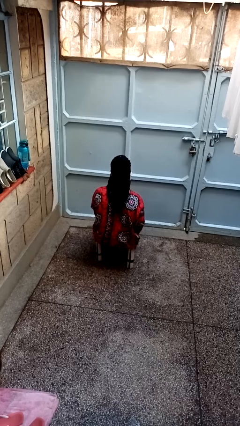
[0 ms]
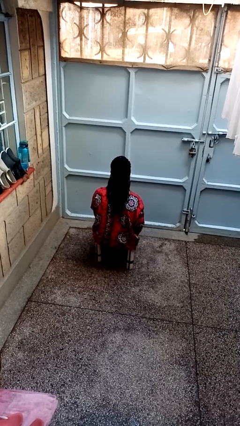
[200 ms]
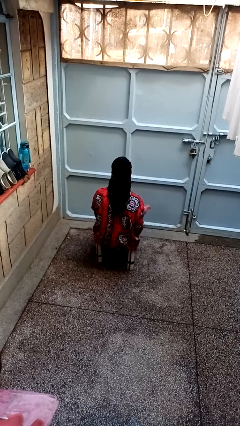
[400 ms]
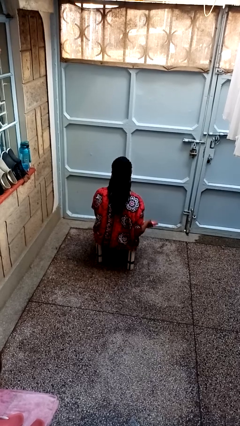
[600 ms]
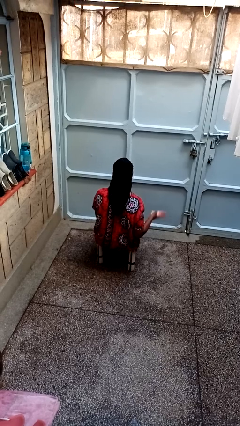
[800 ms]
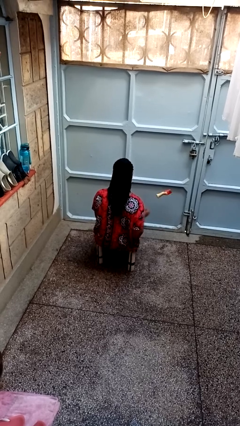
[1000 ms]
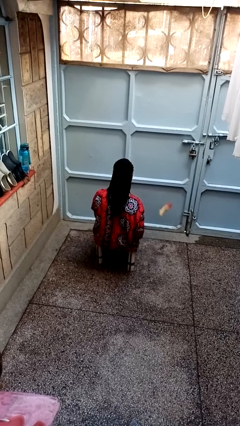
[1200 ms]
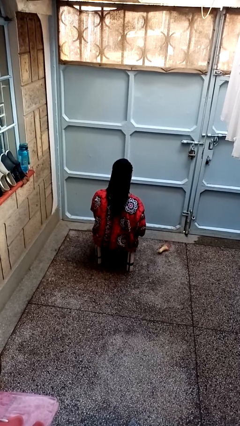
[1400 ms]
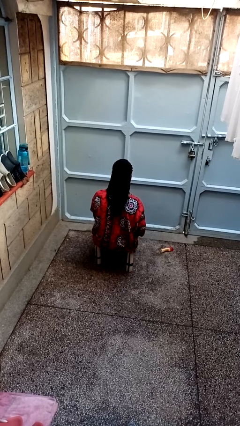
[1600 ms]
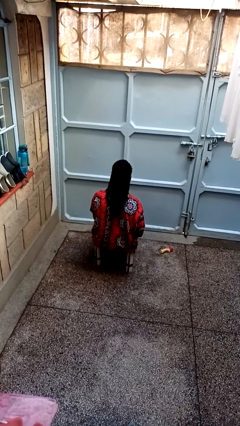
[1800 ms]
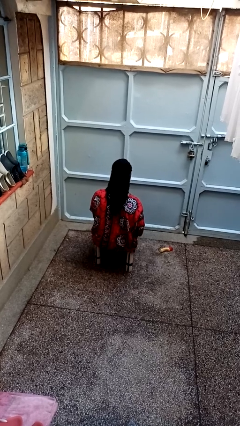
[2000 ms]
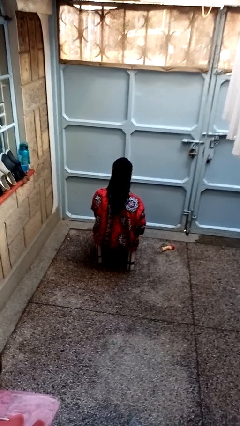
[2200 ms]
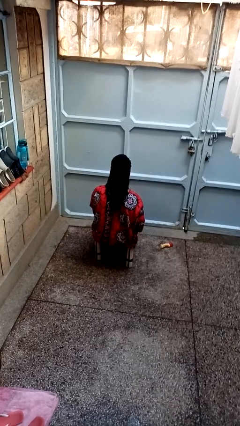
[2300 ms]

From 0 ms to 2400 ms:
person throws object into air

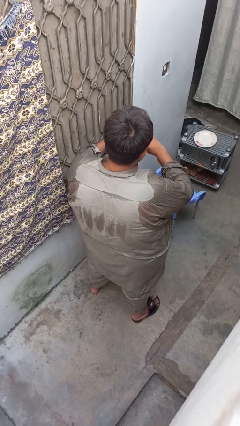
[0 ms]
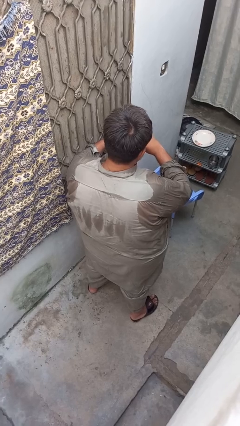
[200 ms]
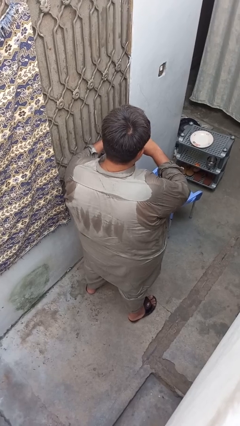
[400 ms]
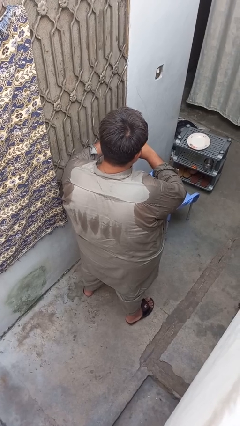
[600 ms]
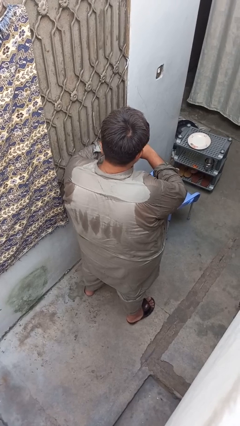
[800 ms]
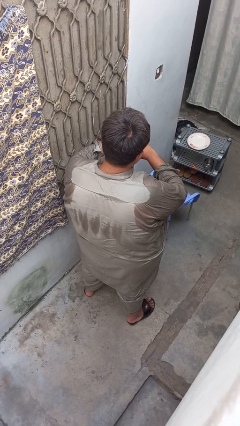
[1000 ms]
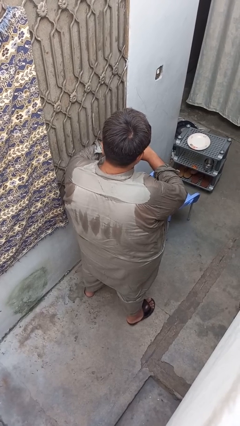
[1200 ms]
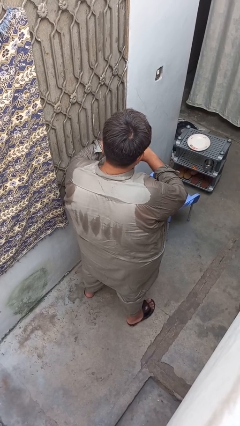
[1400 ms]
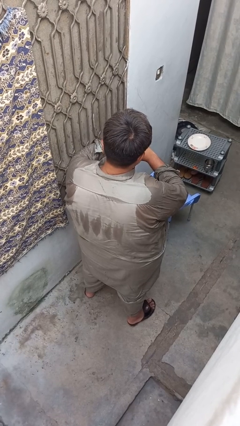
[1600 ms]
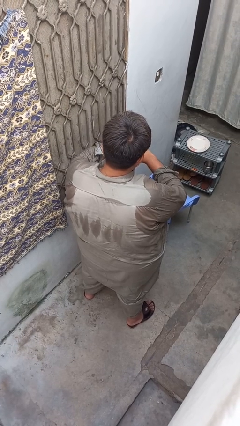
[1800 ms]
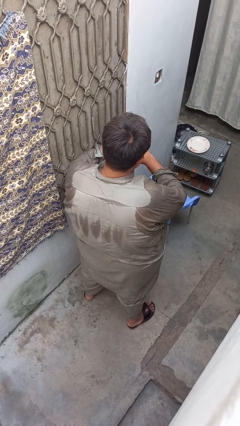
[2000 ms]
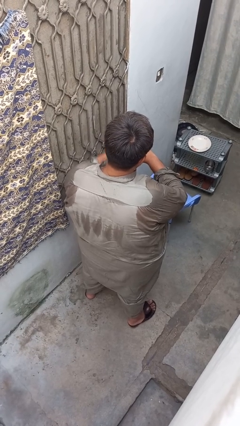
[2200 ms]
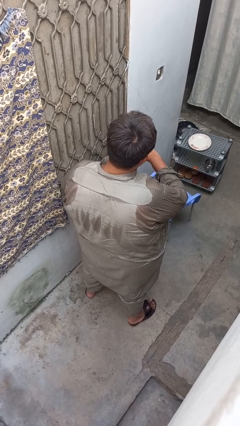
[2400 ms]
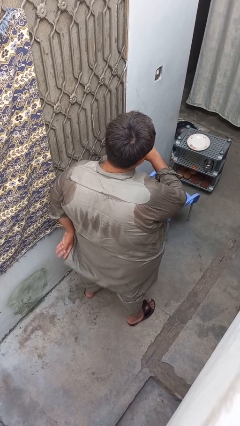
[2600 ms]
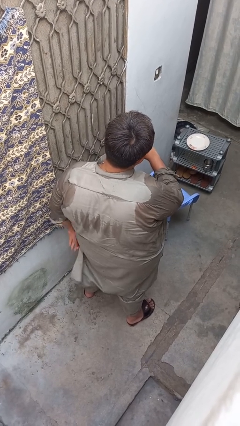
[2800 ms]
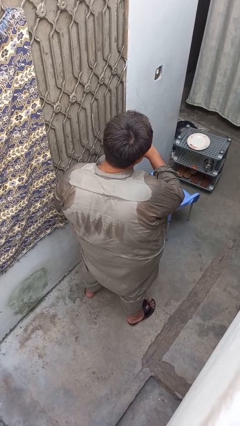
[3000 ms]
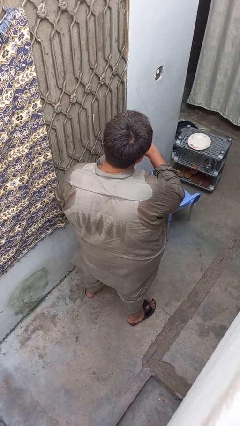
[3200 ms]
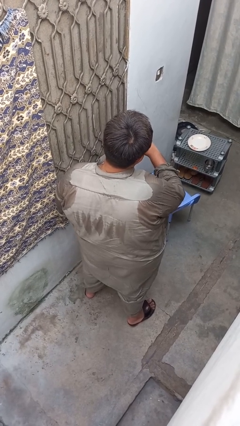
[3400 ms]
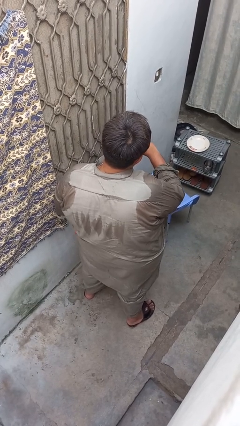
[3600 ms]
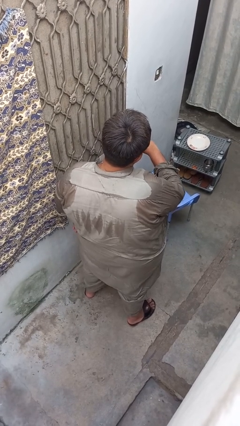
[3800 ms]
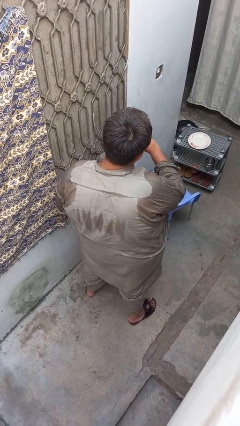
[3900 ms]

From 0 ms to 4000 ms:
person puts on ring

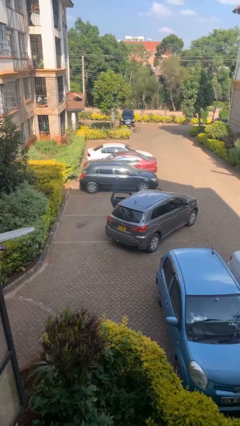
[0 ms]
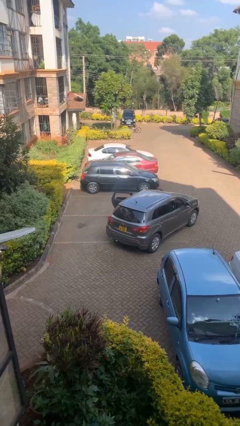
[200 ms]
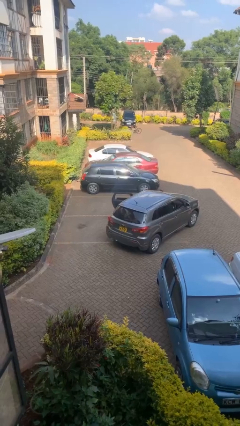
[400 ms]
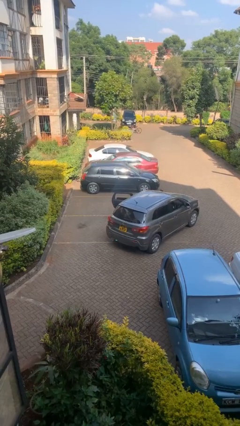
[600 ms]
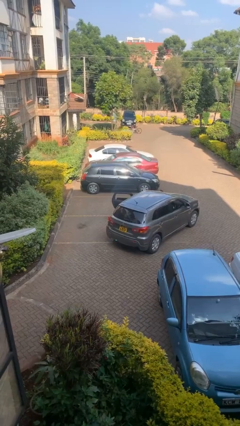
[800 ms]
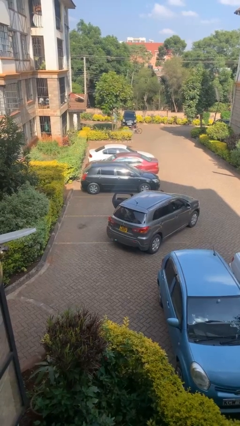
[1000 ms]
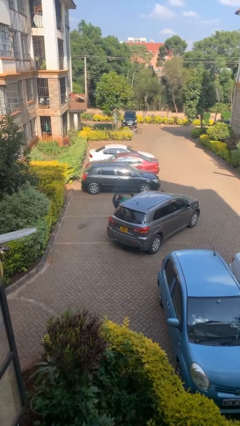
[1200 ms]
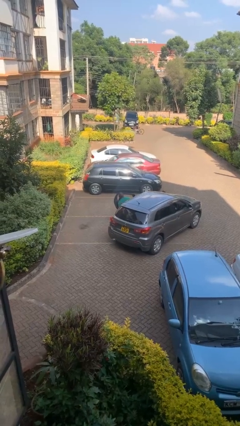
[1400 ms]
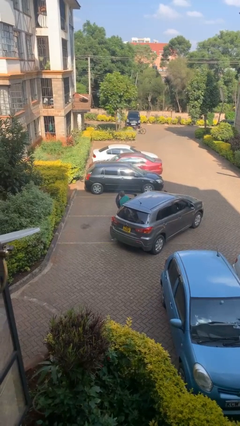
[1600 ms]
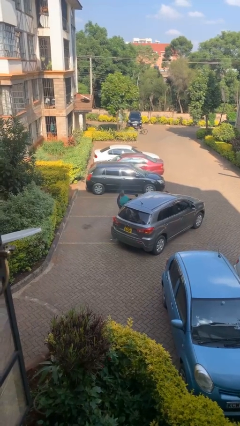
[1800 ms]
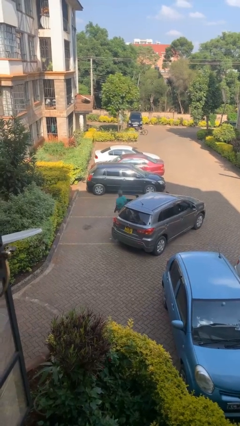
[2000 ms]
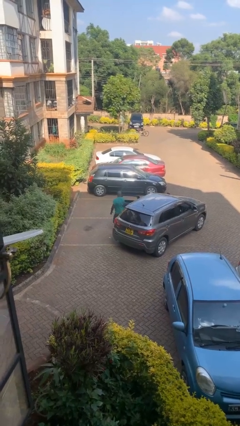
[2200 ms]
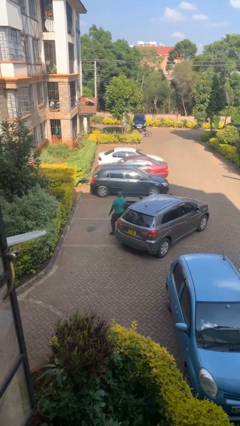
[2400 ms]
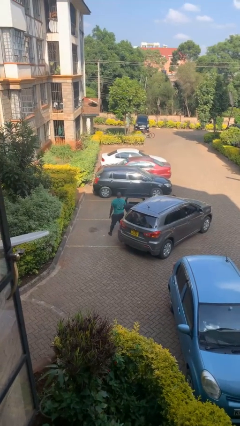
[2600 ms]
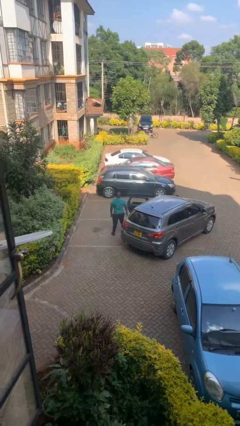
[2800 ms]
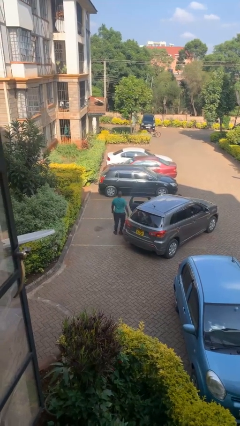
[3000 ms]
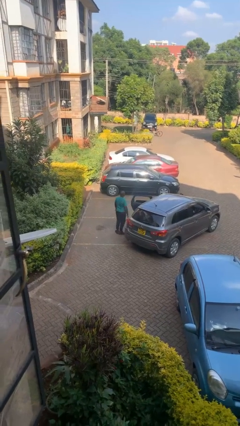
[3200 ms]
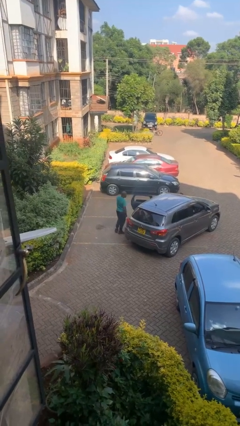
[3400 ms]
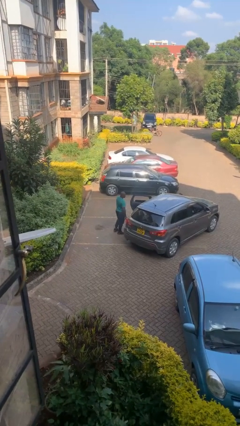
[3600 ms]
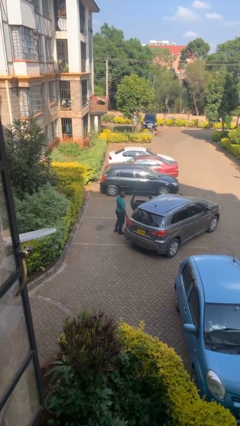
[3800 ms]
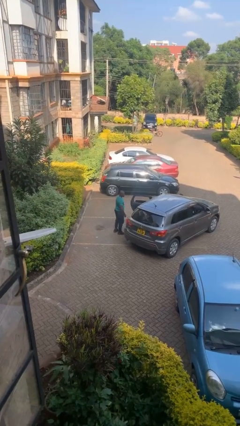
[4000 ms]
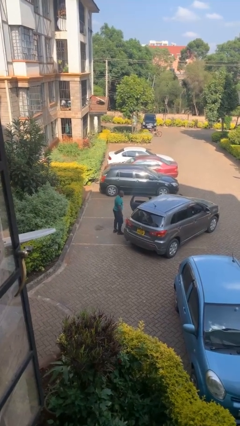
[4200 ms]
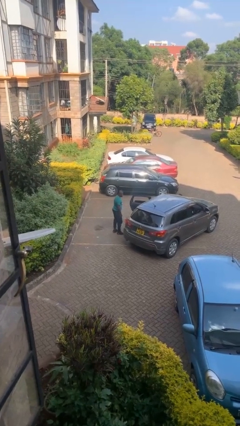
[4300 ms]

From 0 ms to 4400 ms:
person exits car

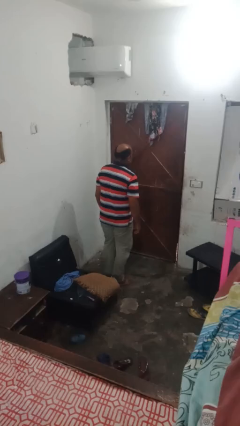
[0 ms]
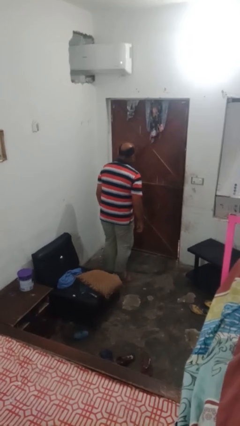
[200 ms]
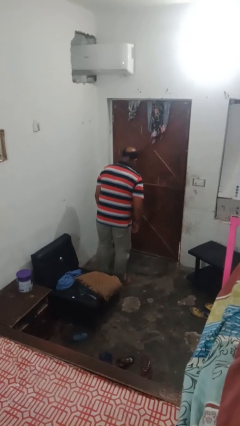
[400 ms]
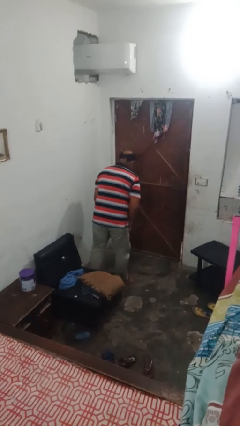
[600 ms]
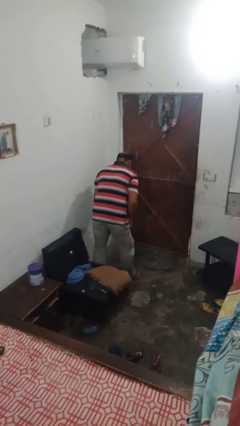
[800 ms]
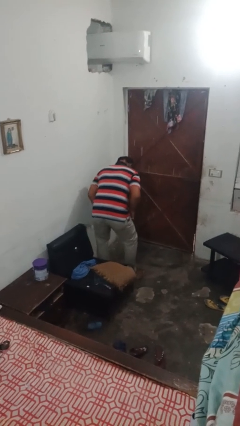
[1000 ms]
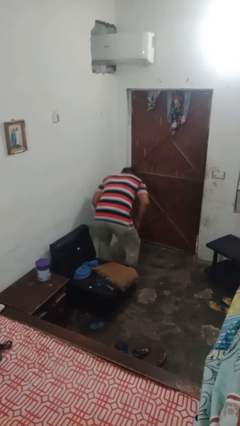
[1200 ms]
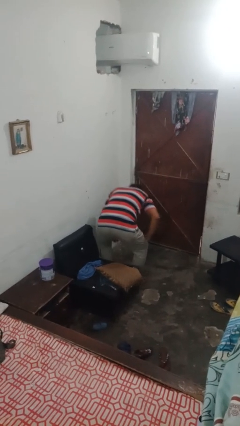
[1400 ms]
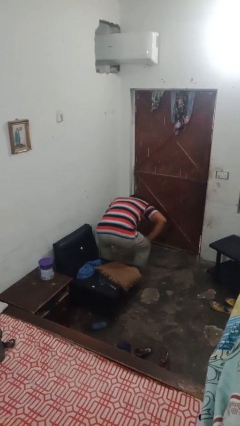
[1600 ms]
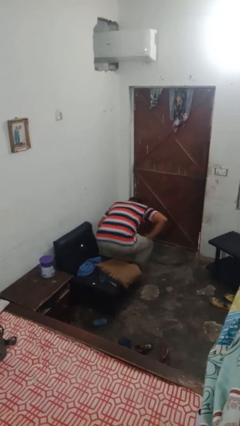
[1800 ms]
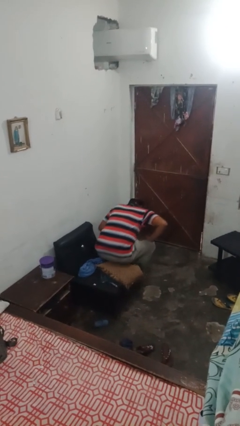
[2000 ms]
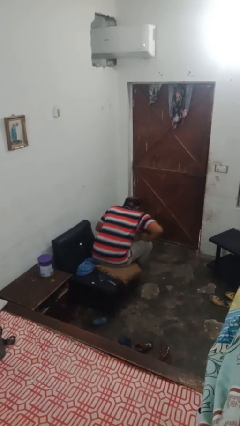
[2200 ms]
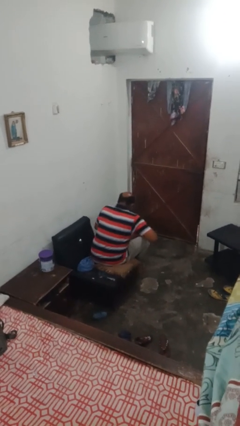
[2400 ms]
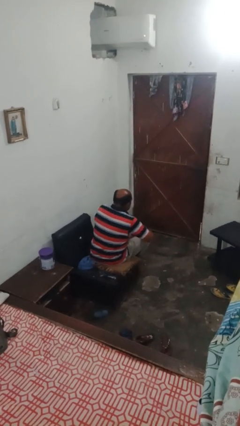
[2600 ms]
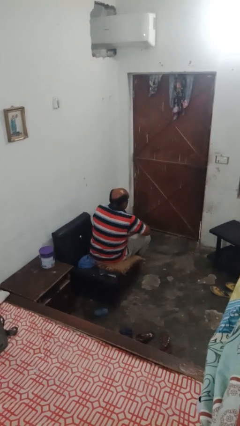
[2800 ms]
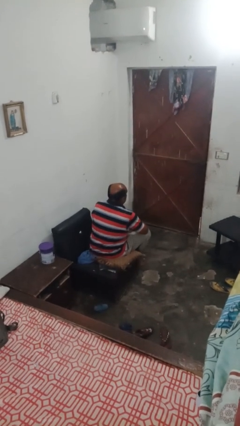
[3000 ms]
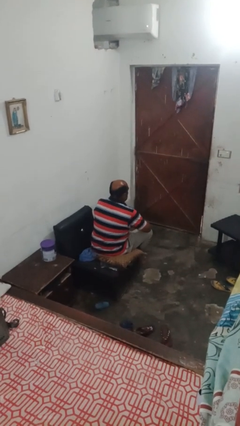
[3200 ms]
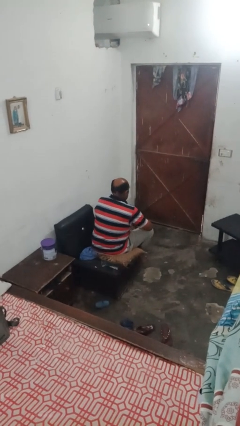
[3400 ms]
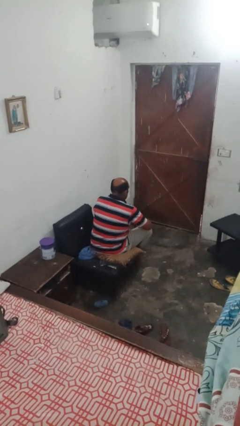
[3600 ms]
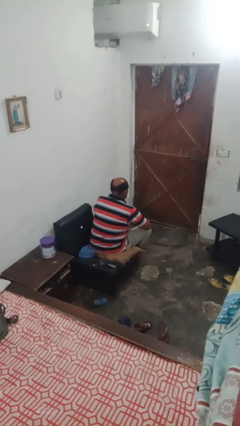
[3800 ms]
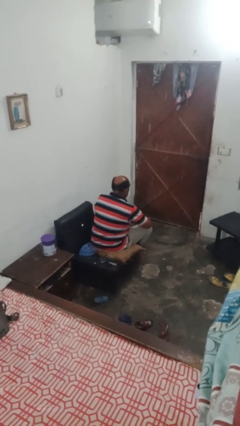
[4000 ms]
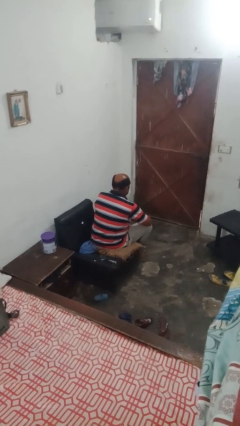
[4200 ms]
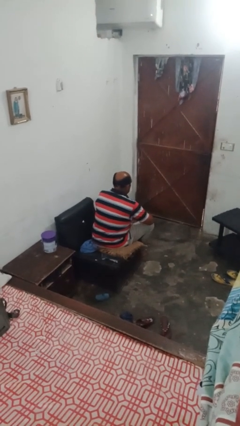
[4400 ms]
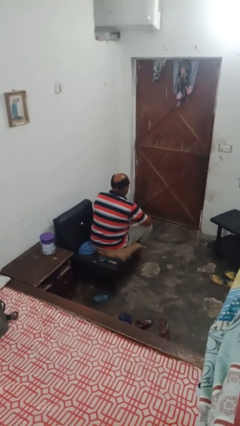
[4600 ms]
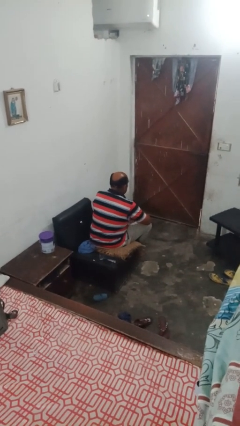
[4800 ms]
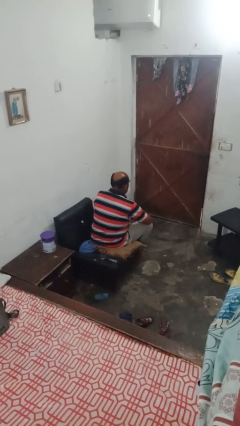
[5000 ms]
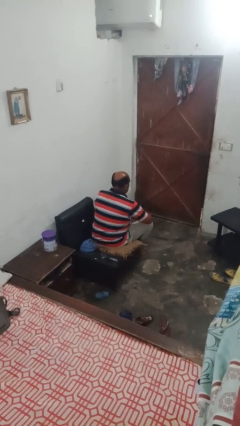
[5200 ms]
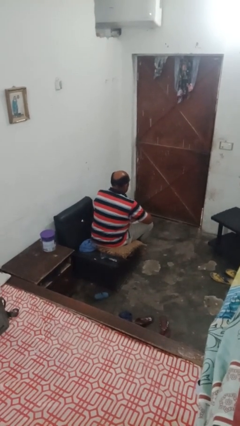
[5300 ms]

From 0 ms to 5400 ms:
person sits down

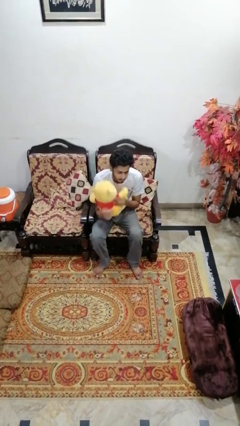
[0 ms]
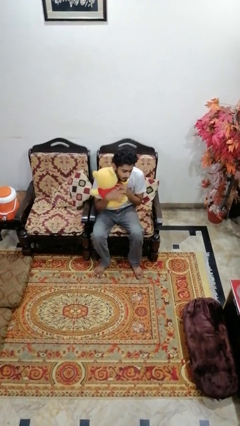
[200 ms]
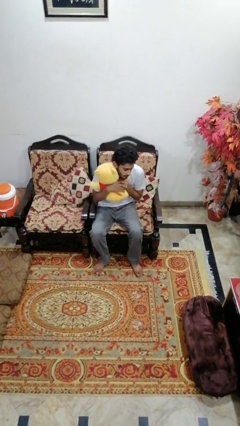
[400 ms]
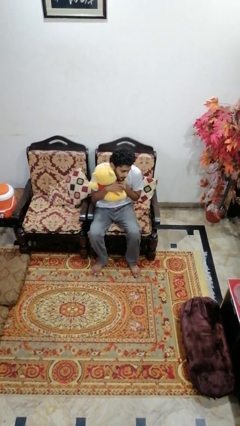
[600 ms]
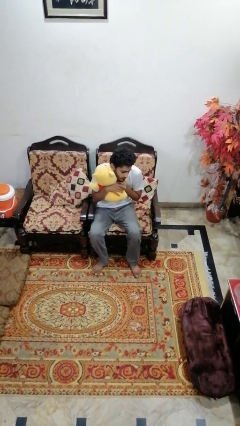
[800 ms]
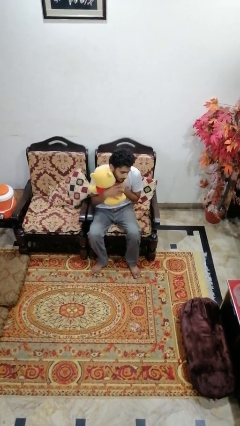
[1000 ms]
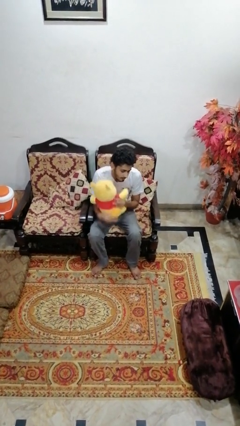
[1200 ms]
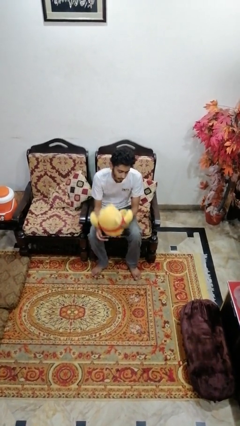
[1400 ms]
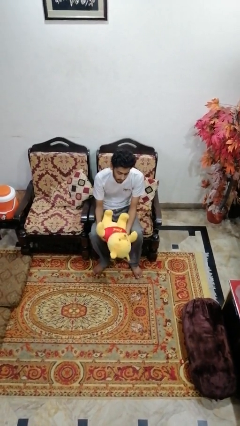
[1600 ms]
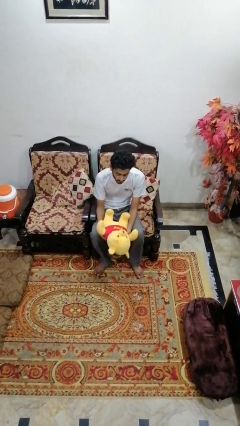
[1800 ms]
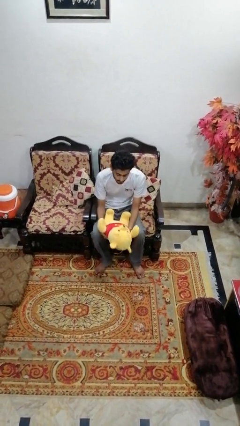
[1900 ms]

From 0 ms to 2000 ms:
person hugs stuffed animal
